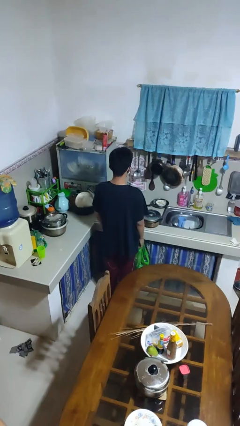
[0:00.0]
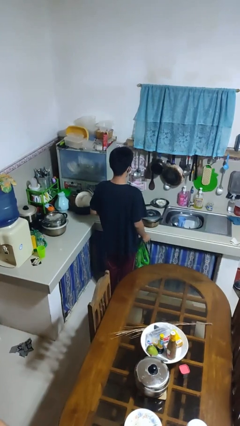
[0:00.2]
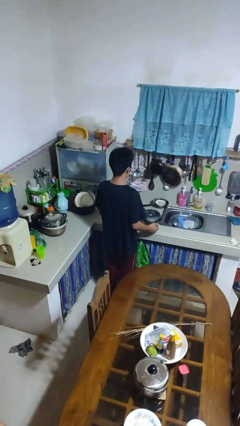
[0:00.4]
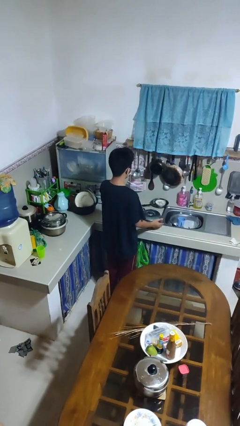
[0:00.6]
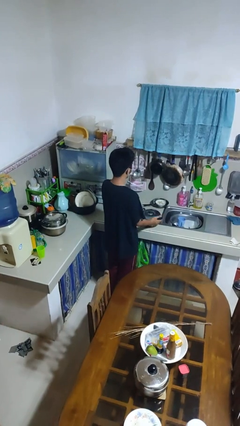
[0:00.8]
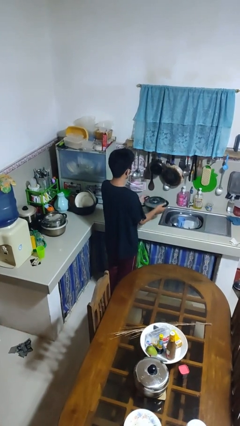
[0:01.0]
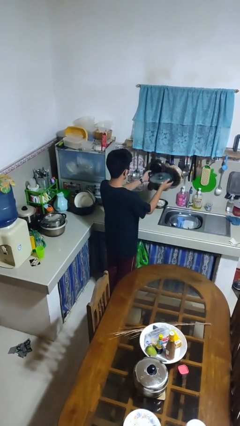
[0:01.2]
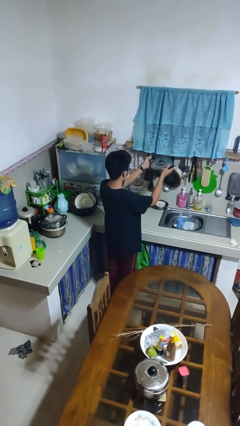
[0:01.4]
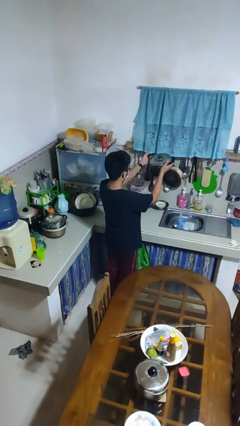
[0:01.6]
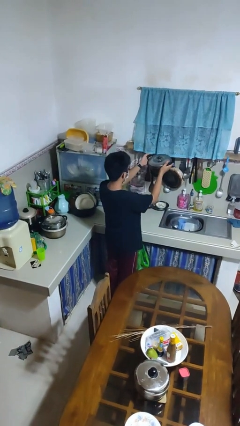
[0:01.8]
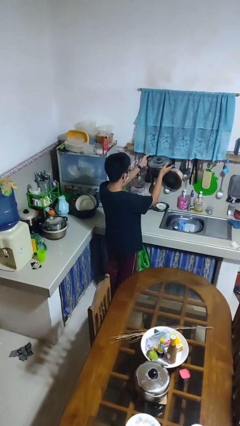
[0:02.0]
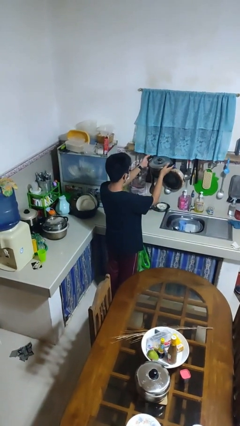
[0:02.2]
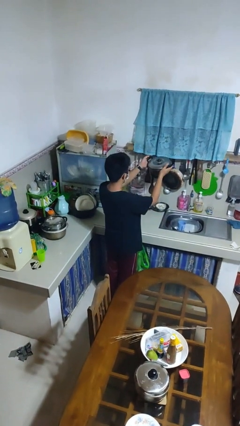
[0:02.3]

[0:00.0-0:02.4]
person picks up object from countertop

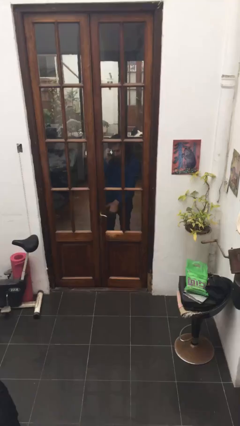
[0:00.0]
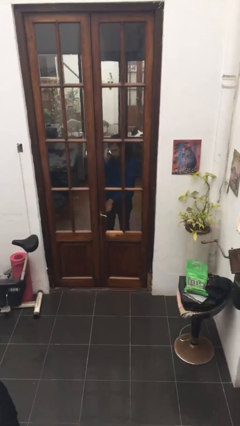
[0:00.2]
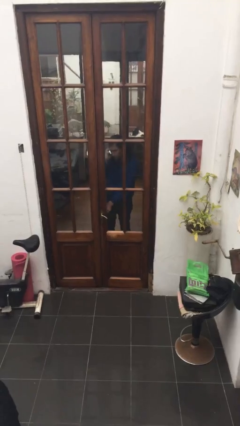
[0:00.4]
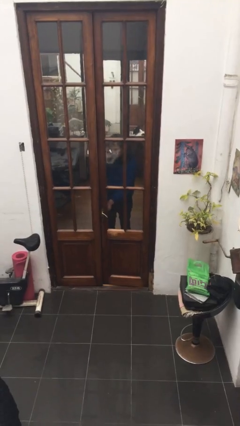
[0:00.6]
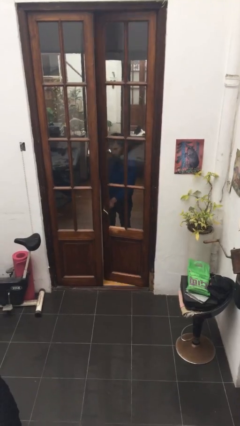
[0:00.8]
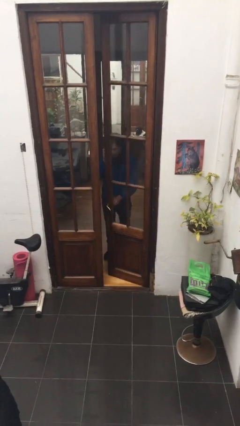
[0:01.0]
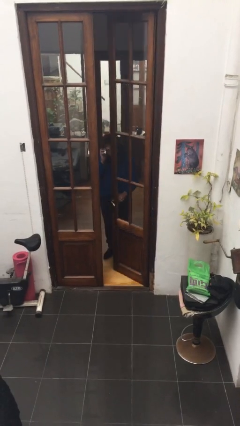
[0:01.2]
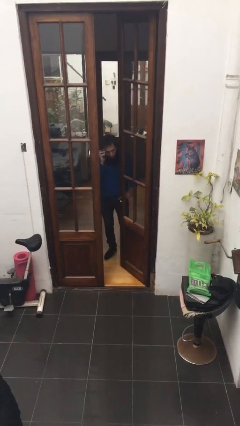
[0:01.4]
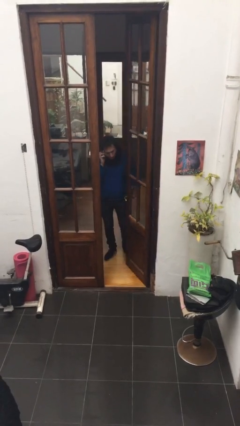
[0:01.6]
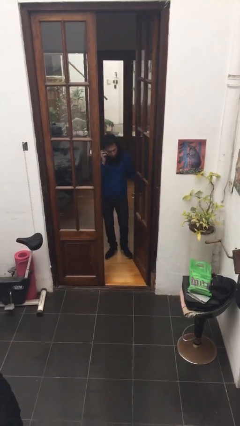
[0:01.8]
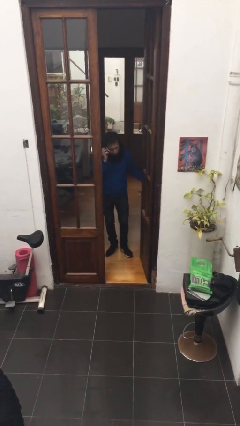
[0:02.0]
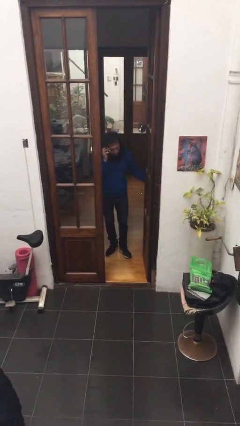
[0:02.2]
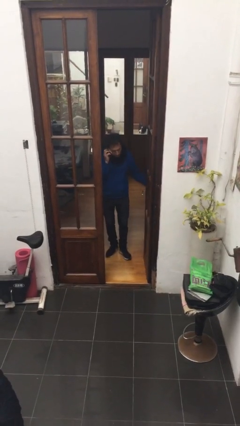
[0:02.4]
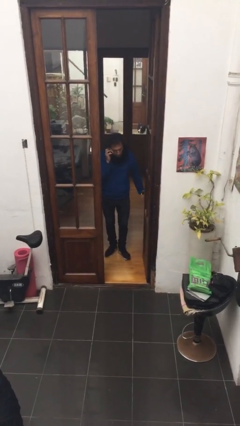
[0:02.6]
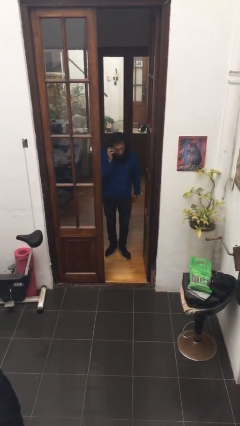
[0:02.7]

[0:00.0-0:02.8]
person opens facility door

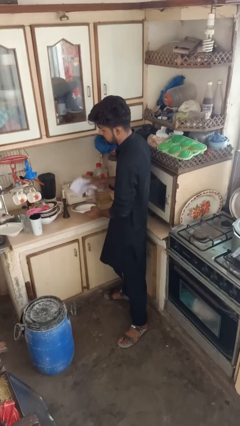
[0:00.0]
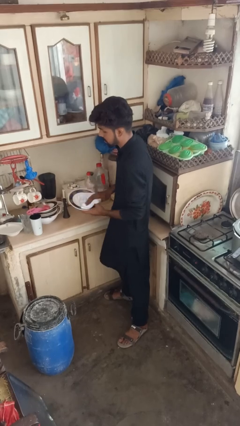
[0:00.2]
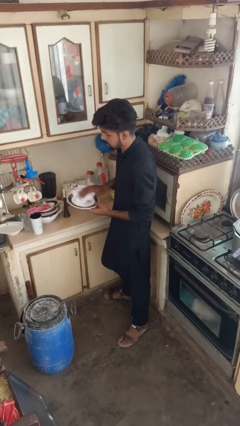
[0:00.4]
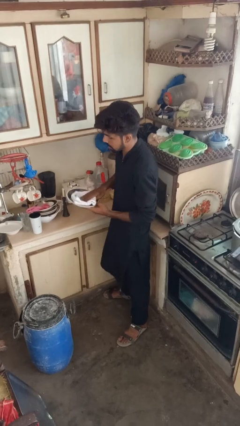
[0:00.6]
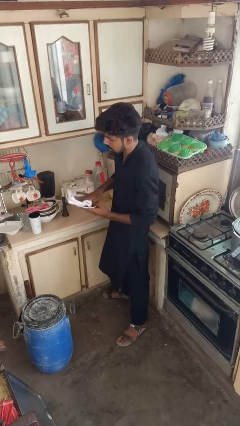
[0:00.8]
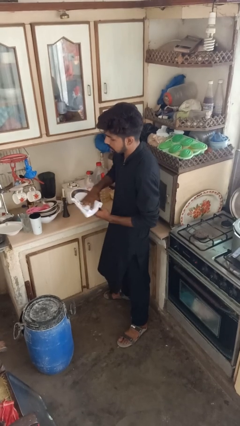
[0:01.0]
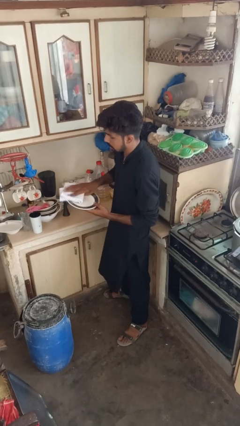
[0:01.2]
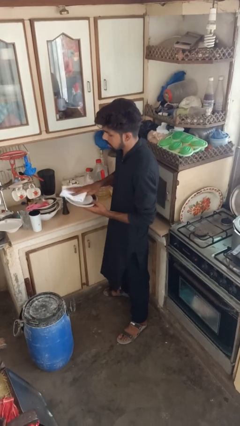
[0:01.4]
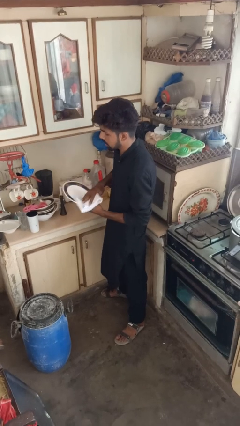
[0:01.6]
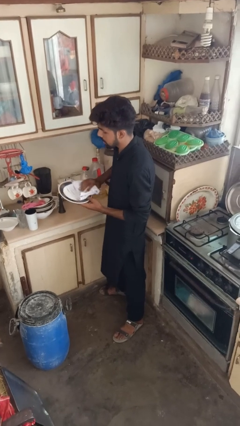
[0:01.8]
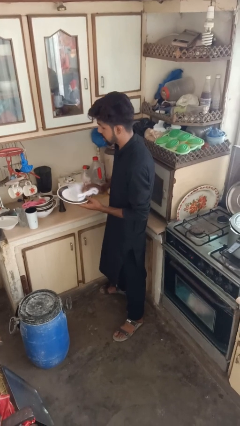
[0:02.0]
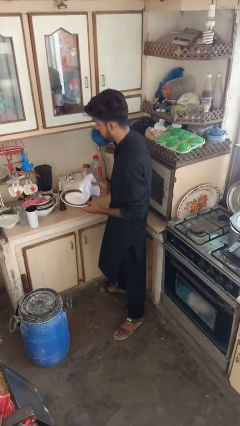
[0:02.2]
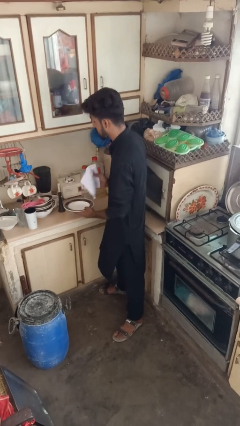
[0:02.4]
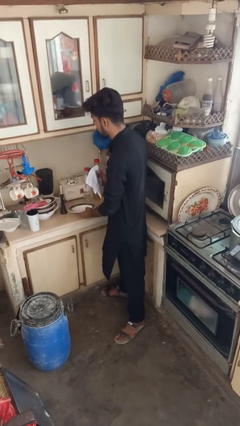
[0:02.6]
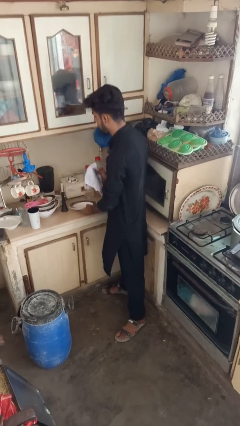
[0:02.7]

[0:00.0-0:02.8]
person dries dish

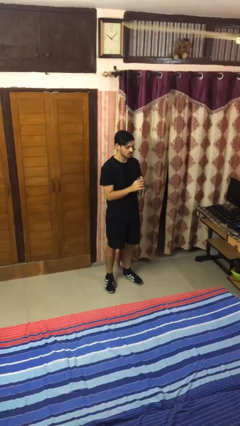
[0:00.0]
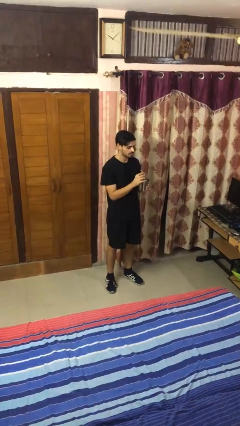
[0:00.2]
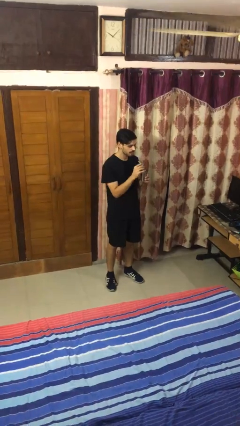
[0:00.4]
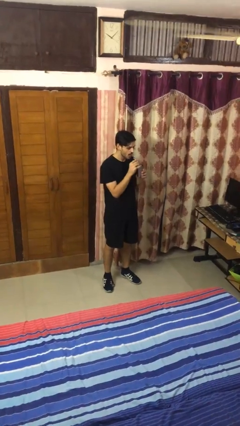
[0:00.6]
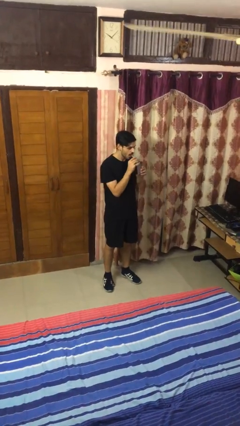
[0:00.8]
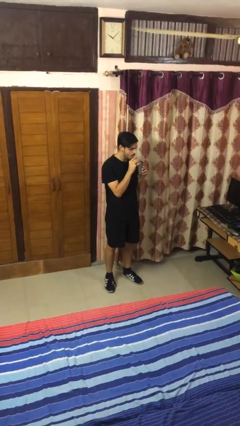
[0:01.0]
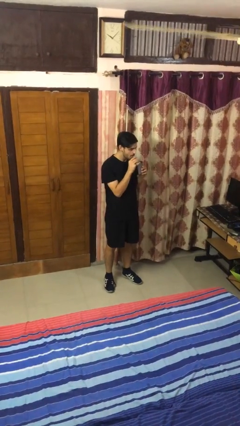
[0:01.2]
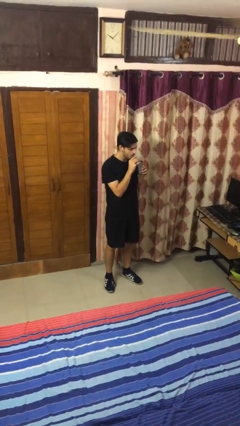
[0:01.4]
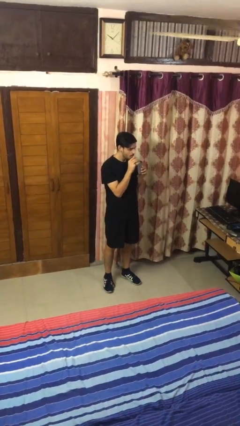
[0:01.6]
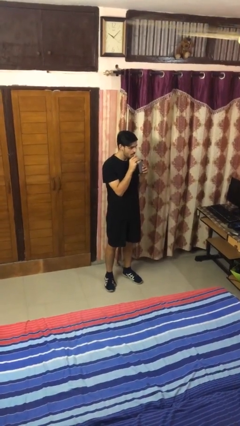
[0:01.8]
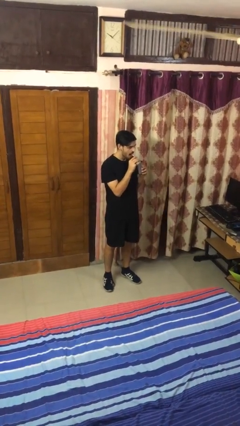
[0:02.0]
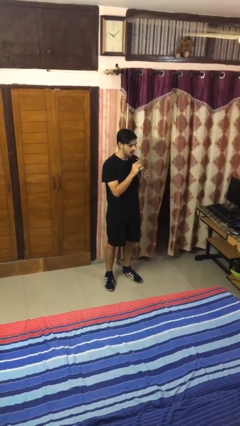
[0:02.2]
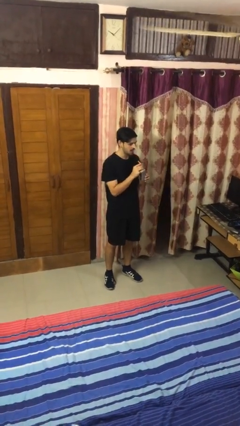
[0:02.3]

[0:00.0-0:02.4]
person drinks from straw

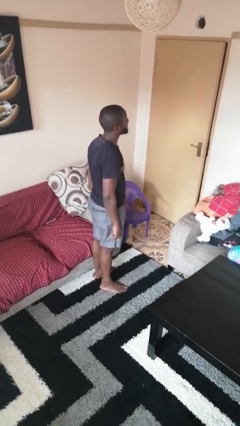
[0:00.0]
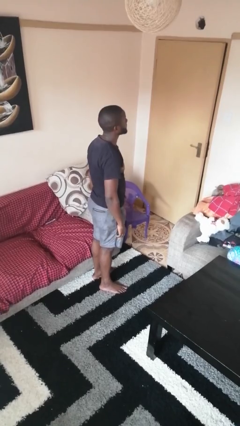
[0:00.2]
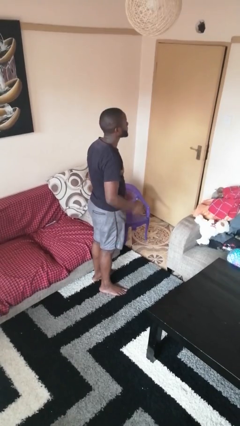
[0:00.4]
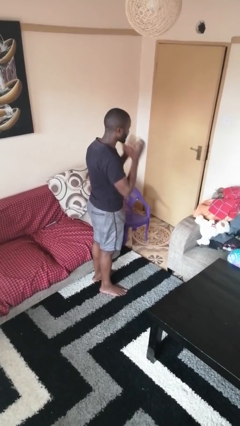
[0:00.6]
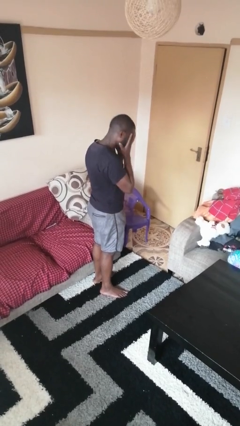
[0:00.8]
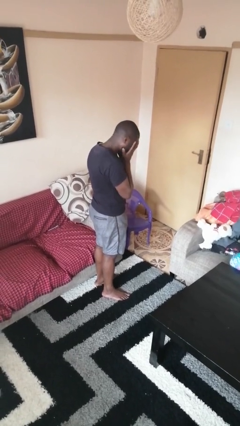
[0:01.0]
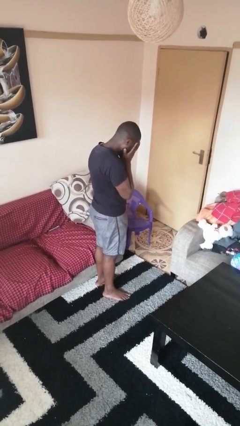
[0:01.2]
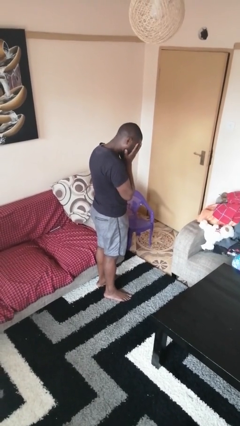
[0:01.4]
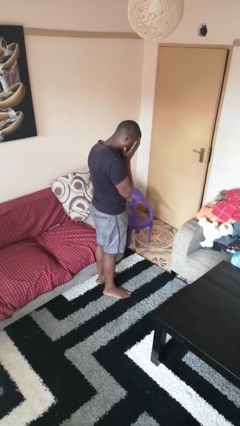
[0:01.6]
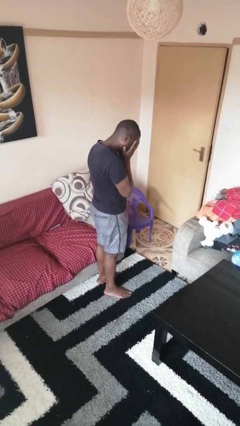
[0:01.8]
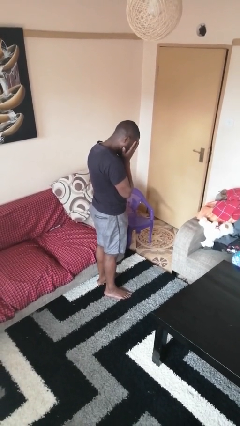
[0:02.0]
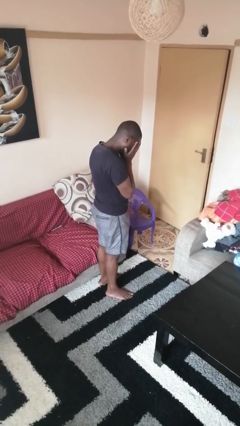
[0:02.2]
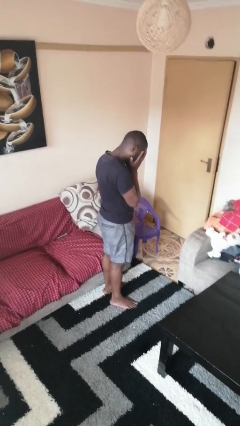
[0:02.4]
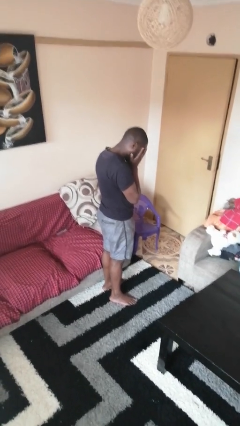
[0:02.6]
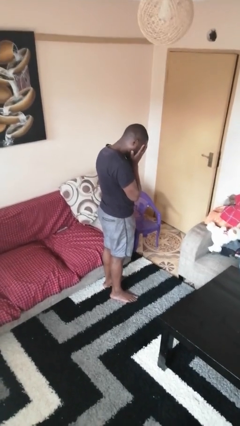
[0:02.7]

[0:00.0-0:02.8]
person covers face with hands

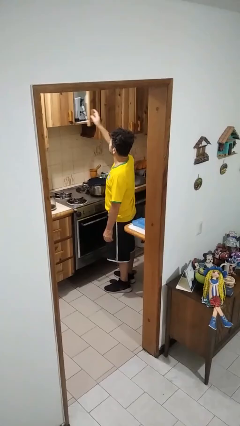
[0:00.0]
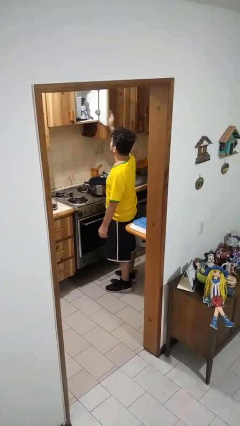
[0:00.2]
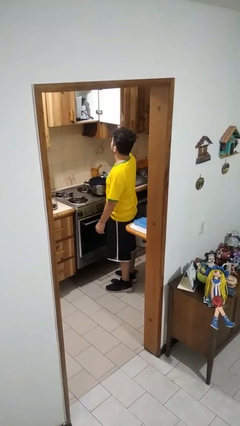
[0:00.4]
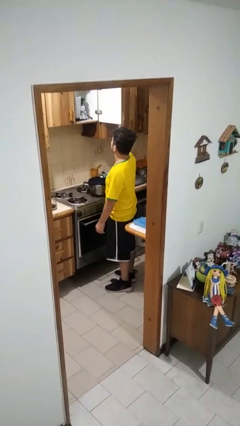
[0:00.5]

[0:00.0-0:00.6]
person opens cabinet

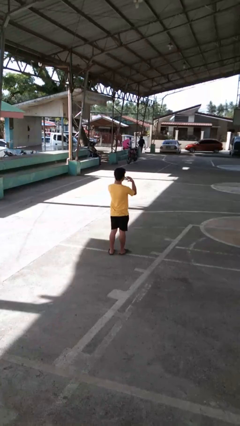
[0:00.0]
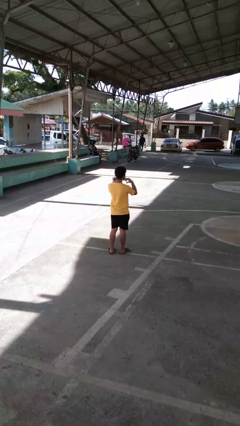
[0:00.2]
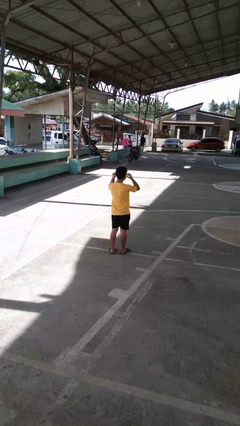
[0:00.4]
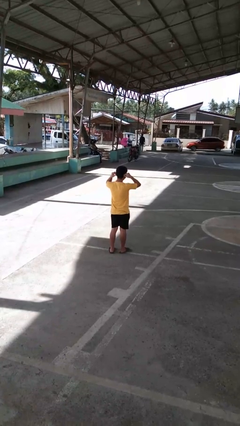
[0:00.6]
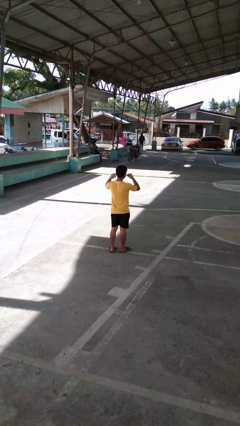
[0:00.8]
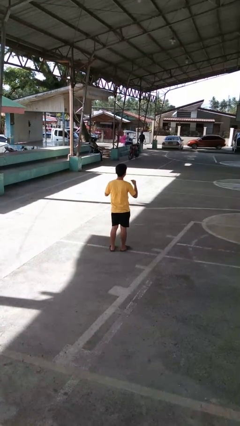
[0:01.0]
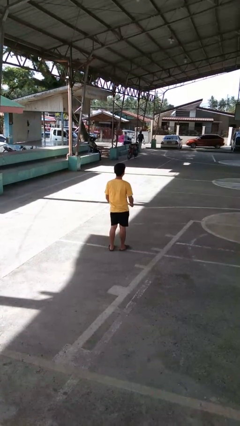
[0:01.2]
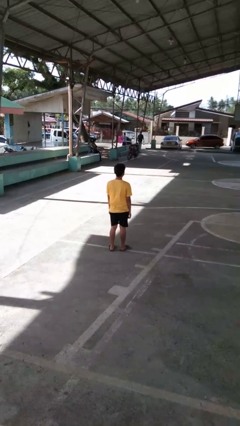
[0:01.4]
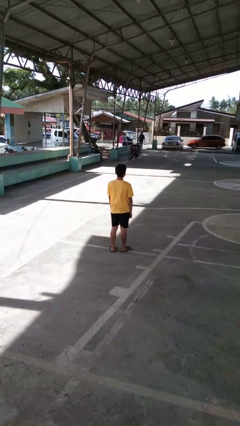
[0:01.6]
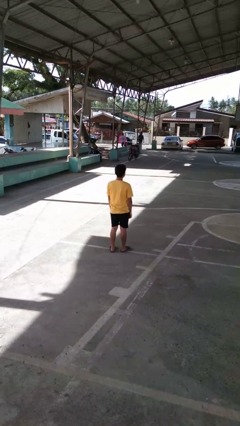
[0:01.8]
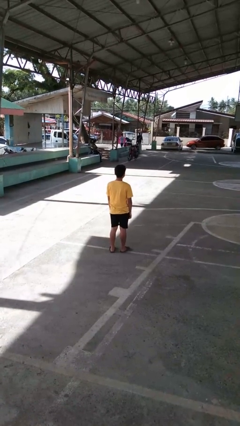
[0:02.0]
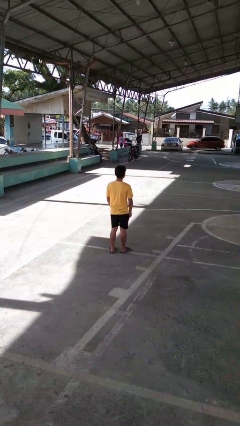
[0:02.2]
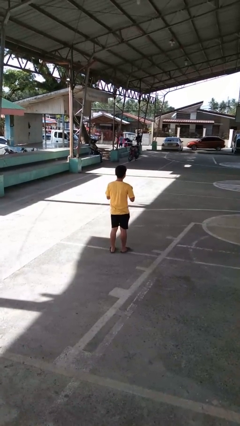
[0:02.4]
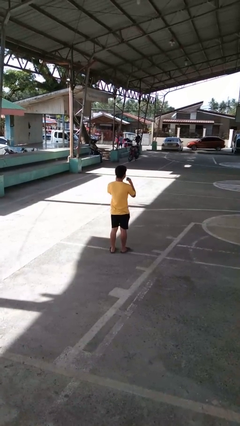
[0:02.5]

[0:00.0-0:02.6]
person puts on facemask

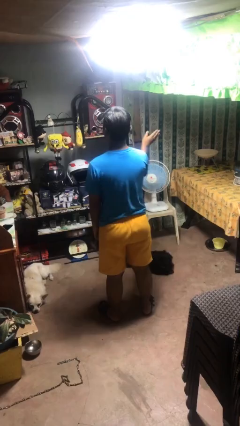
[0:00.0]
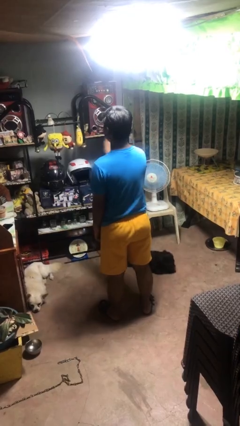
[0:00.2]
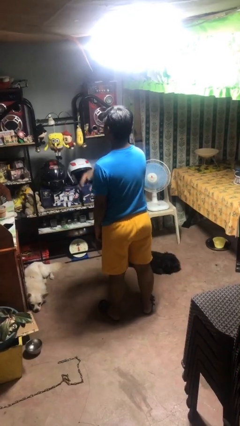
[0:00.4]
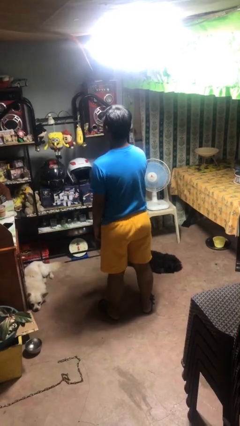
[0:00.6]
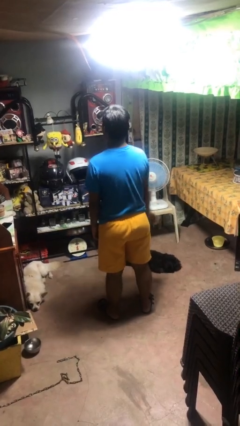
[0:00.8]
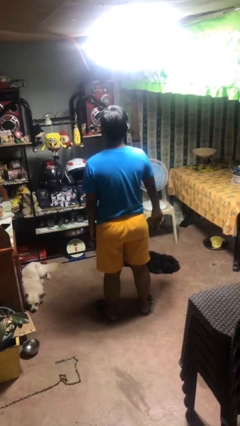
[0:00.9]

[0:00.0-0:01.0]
person gestures swipe left
